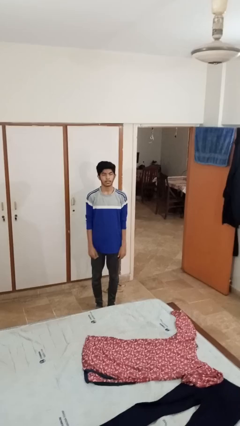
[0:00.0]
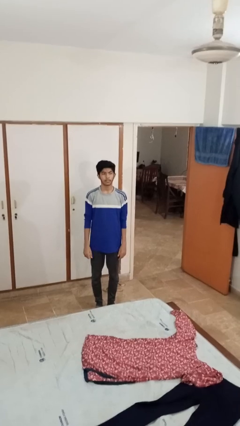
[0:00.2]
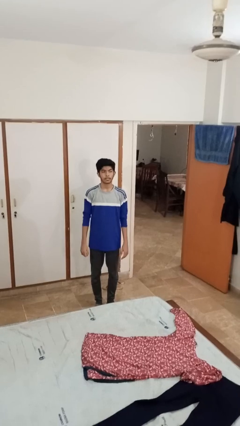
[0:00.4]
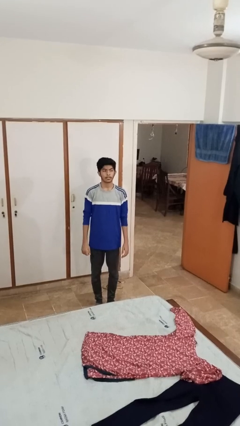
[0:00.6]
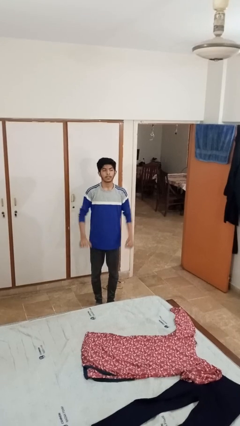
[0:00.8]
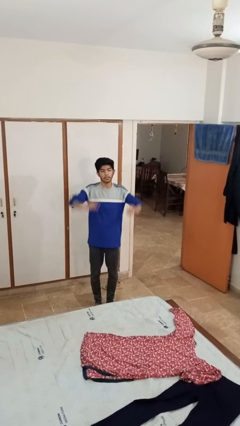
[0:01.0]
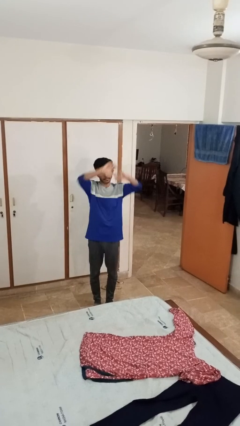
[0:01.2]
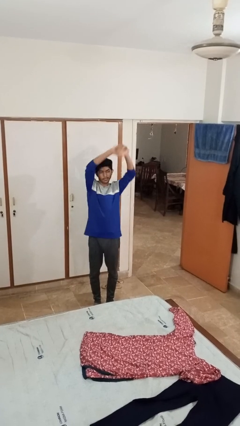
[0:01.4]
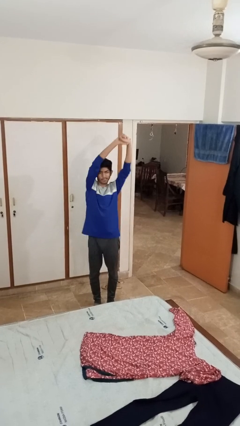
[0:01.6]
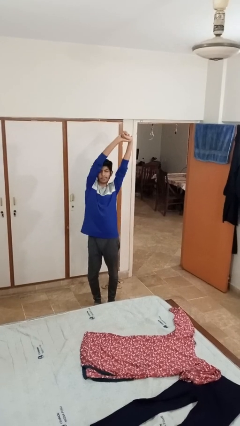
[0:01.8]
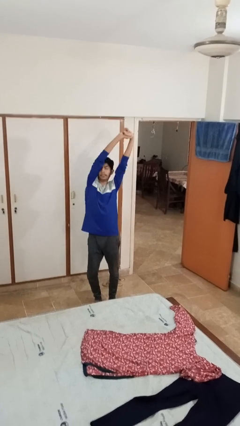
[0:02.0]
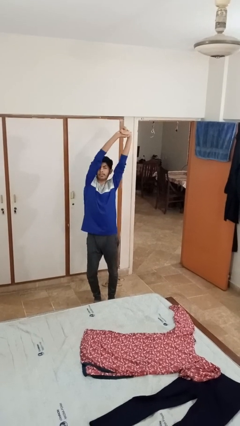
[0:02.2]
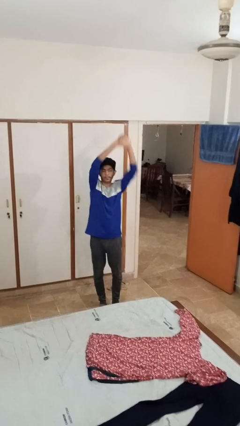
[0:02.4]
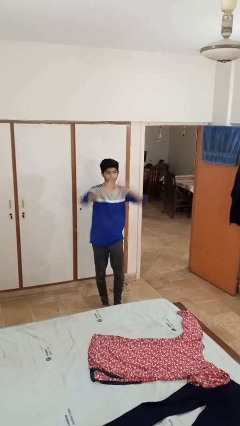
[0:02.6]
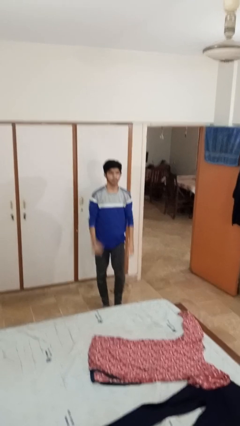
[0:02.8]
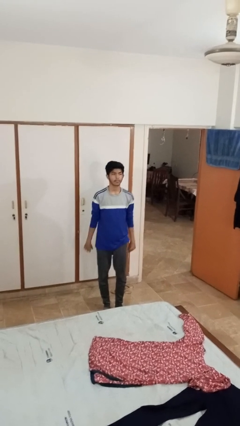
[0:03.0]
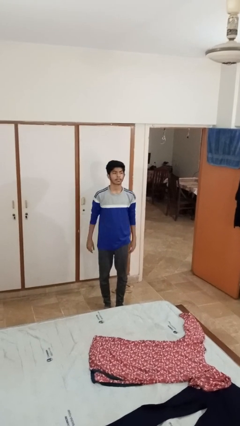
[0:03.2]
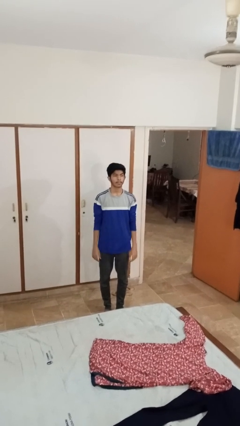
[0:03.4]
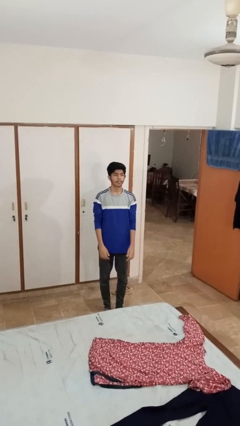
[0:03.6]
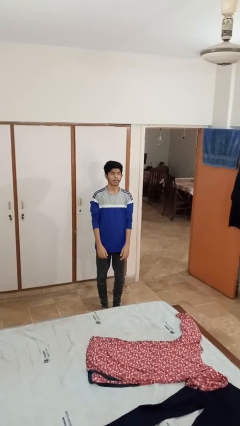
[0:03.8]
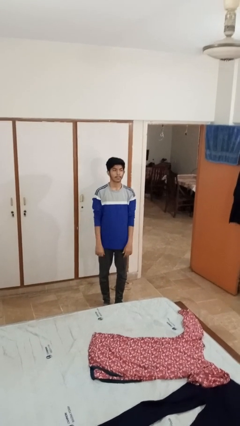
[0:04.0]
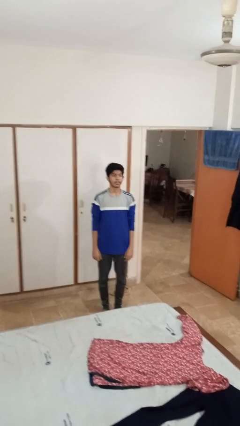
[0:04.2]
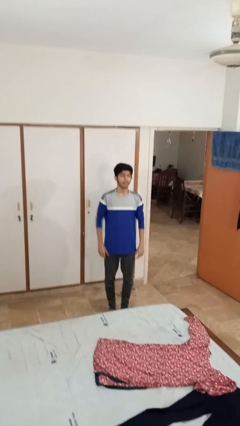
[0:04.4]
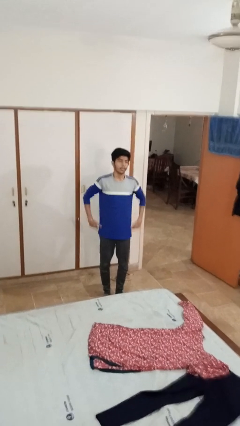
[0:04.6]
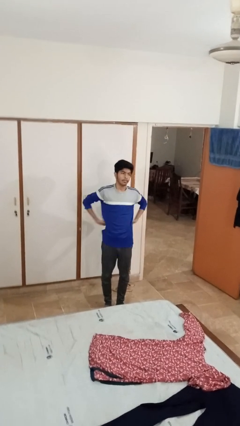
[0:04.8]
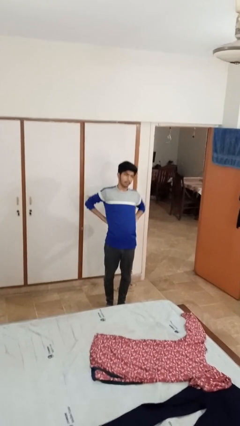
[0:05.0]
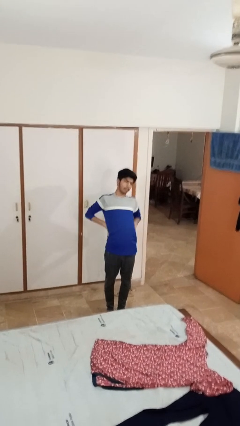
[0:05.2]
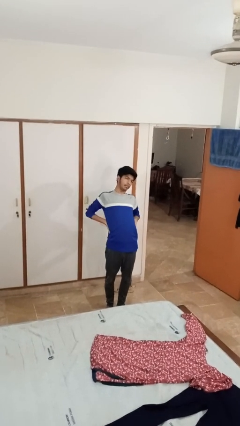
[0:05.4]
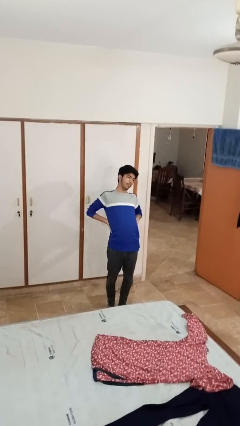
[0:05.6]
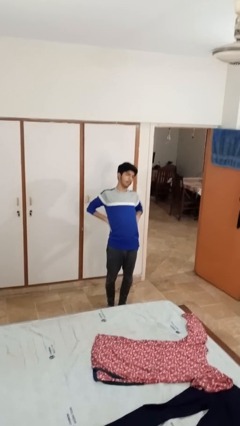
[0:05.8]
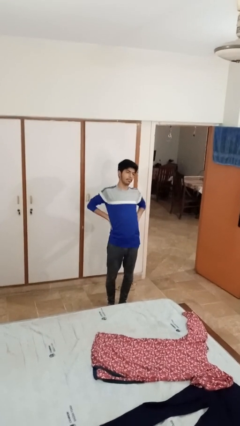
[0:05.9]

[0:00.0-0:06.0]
person stretches arms over head

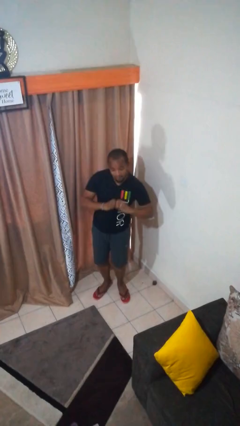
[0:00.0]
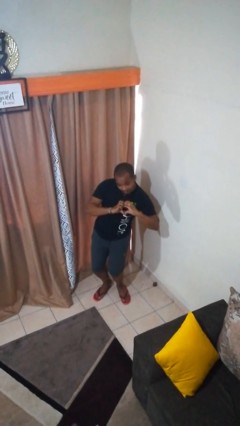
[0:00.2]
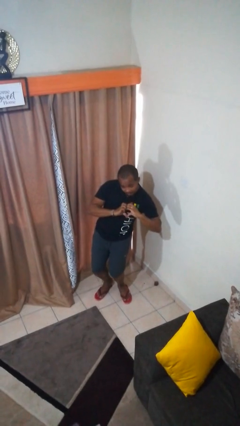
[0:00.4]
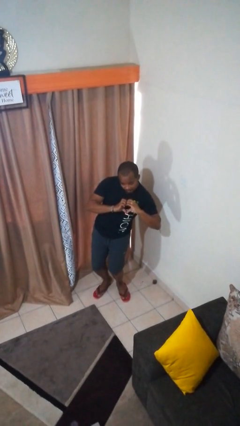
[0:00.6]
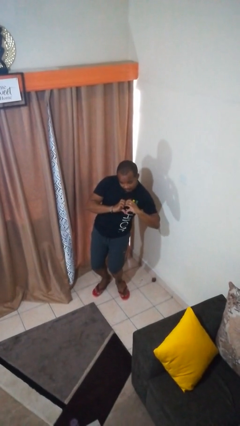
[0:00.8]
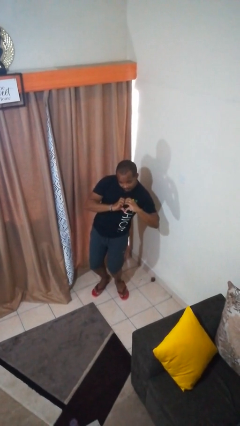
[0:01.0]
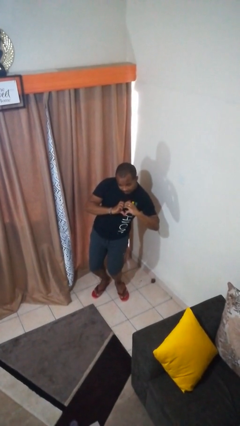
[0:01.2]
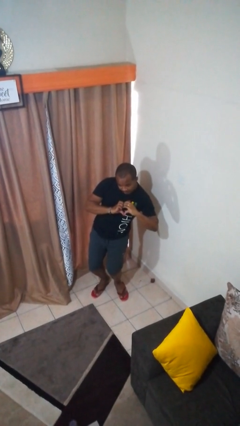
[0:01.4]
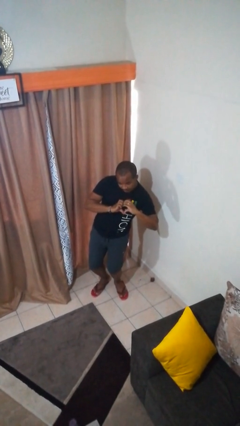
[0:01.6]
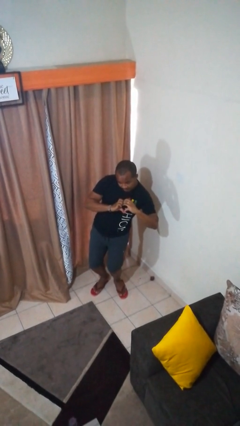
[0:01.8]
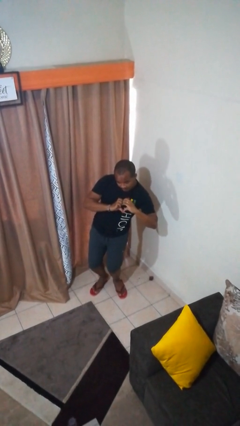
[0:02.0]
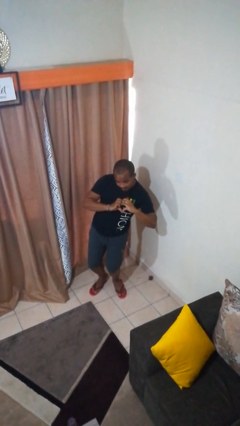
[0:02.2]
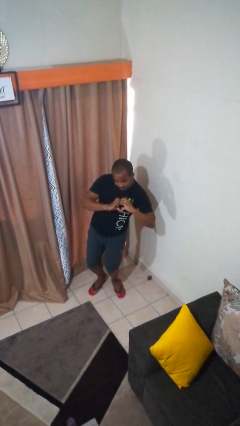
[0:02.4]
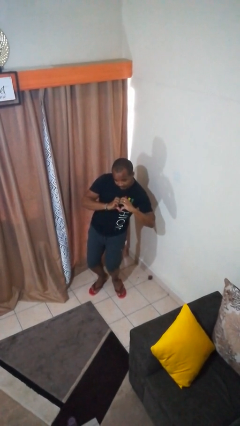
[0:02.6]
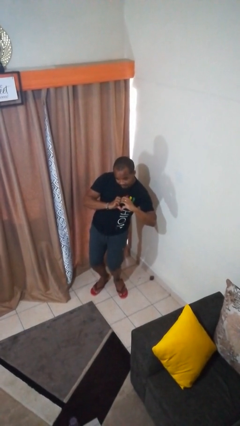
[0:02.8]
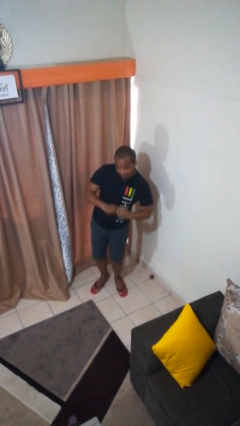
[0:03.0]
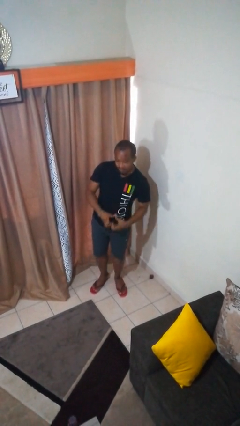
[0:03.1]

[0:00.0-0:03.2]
person gestures heart

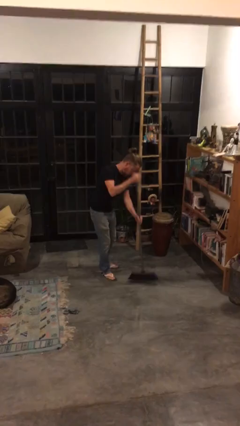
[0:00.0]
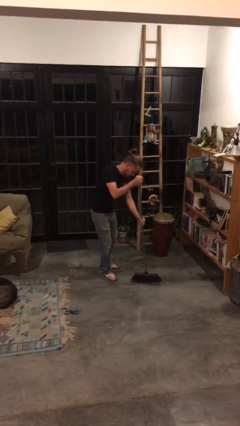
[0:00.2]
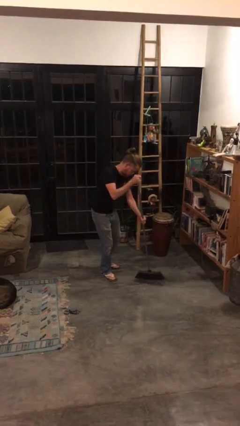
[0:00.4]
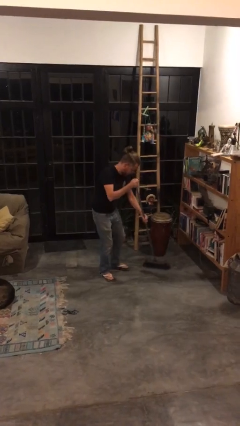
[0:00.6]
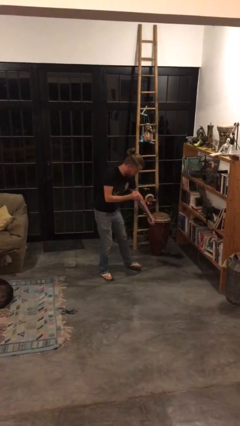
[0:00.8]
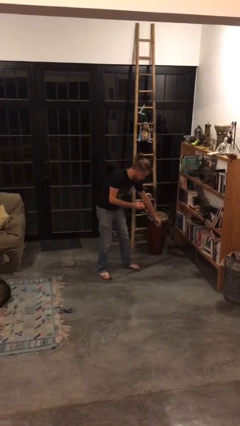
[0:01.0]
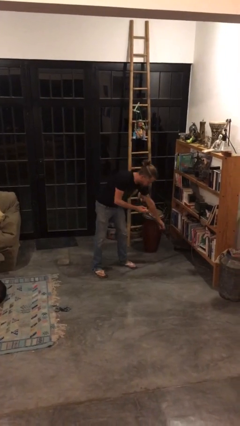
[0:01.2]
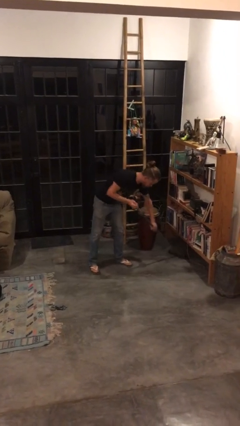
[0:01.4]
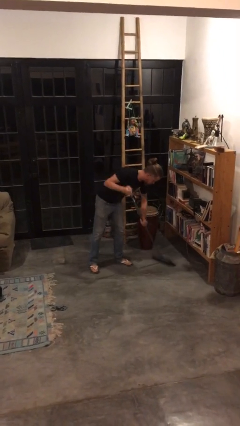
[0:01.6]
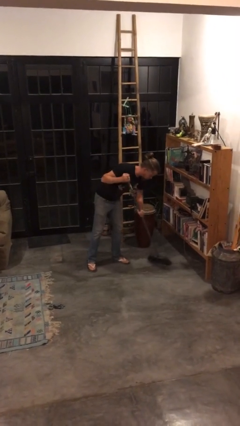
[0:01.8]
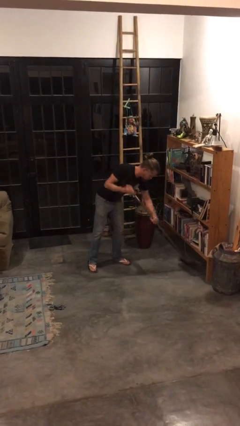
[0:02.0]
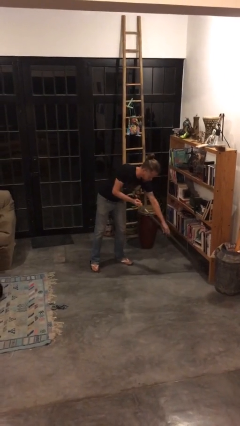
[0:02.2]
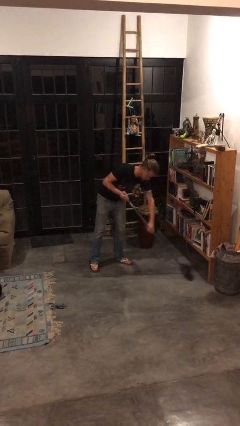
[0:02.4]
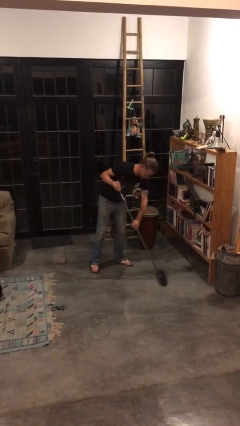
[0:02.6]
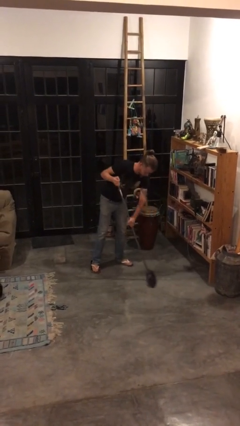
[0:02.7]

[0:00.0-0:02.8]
person sweeps floor

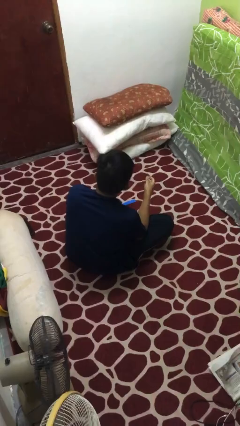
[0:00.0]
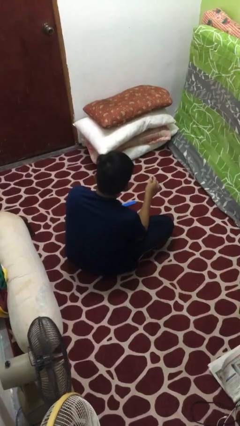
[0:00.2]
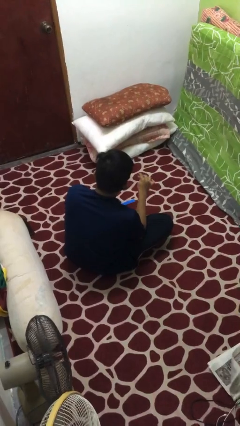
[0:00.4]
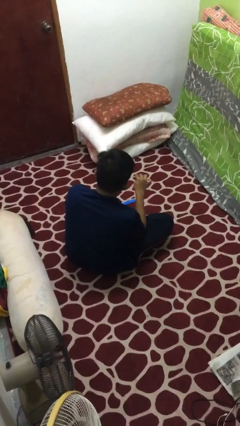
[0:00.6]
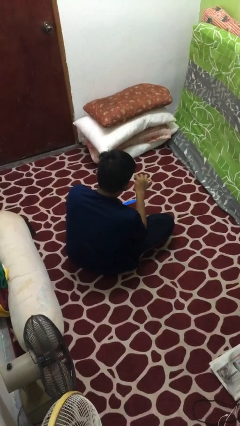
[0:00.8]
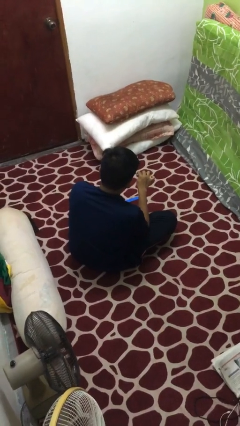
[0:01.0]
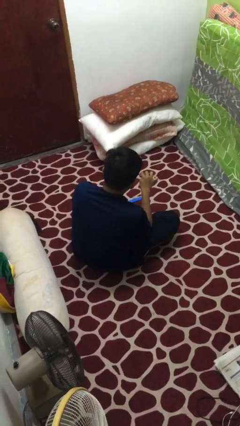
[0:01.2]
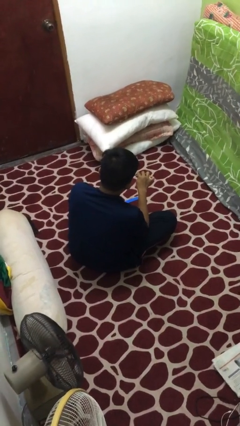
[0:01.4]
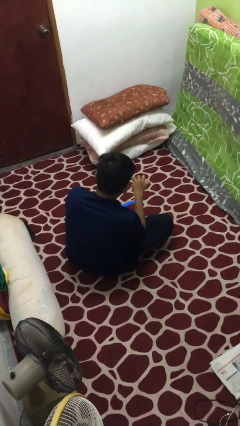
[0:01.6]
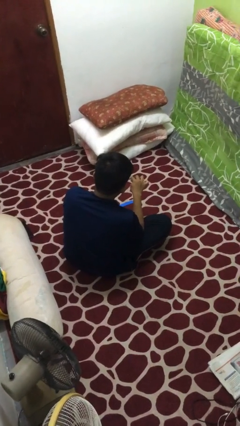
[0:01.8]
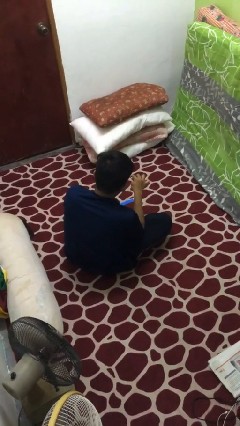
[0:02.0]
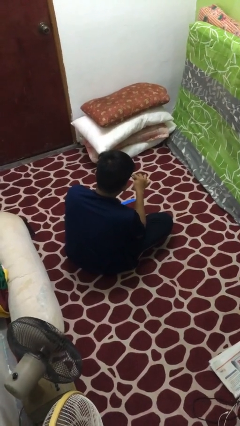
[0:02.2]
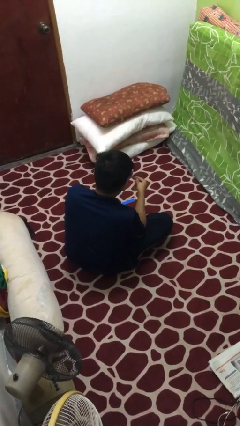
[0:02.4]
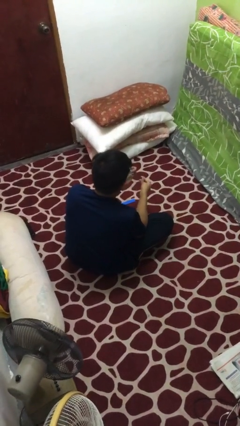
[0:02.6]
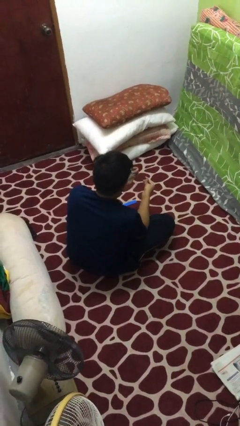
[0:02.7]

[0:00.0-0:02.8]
person clips fingernails

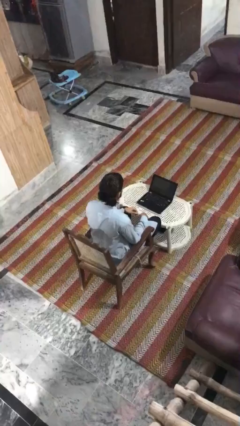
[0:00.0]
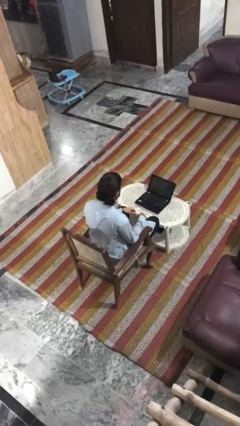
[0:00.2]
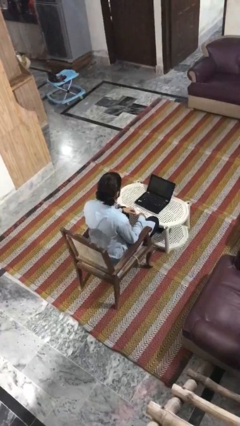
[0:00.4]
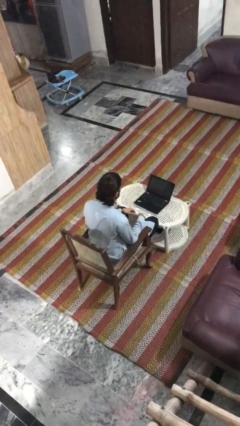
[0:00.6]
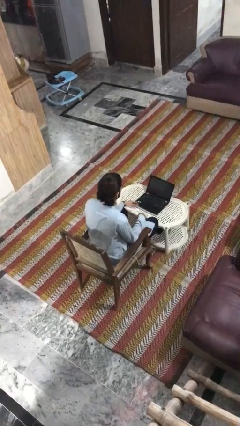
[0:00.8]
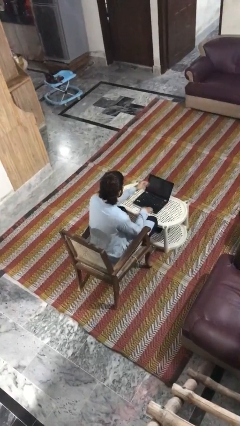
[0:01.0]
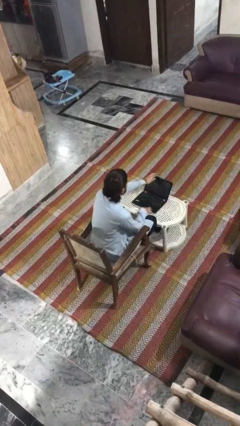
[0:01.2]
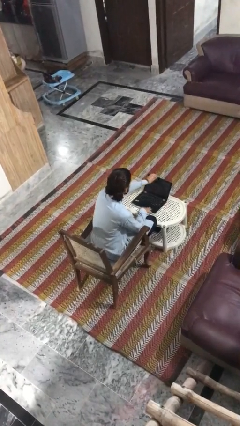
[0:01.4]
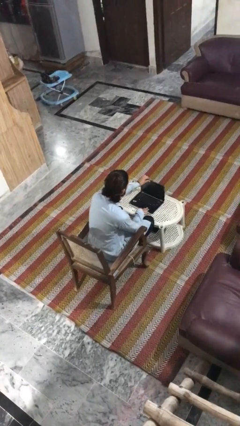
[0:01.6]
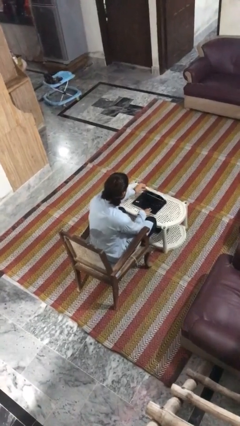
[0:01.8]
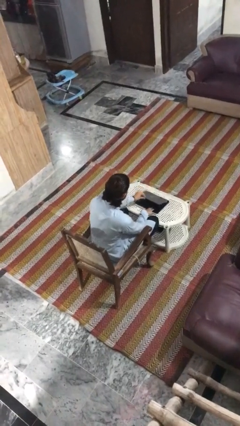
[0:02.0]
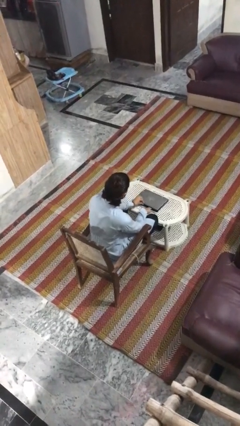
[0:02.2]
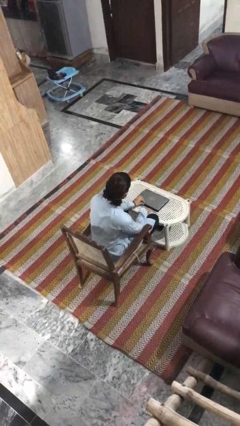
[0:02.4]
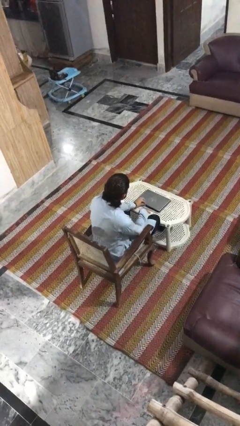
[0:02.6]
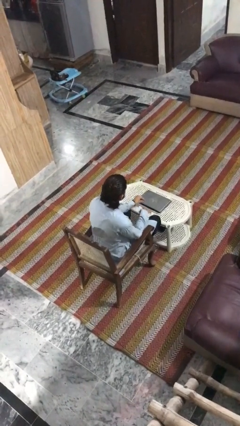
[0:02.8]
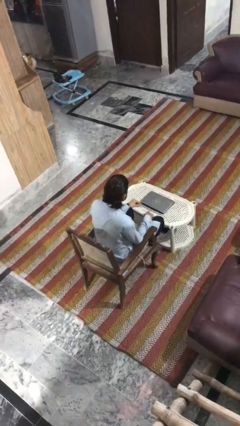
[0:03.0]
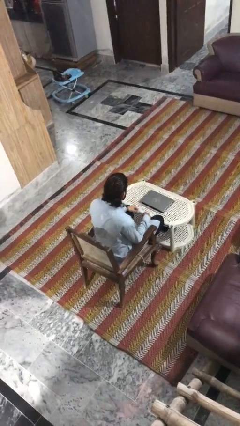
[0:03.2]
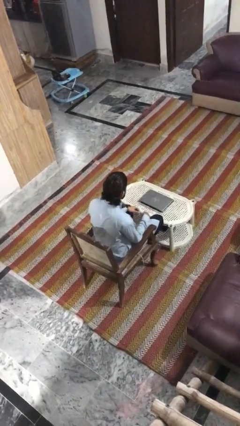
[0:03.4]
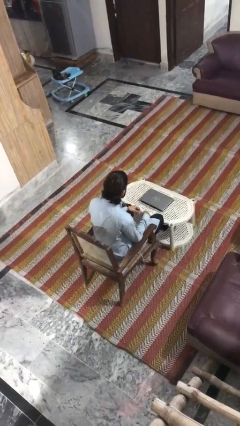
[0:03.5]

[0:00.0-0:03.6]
person closes laptop
